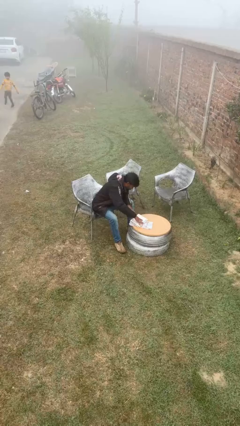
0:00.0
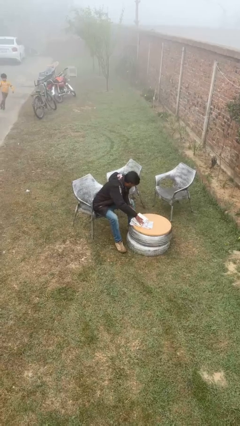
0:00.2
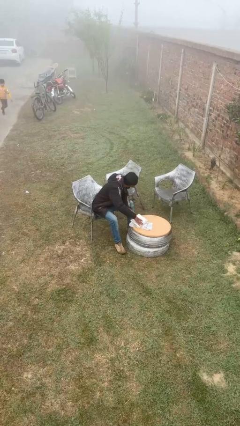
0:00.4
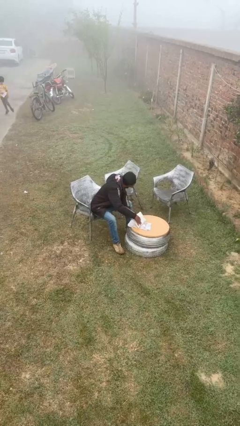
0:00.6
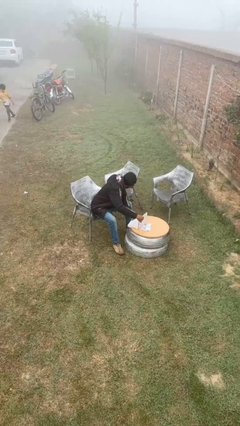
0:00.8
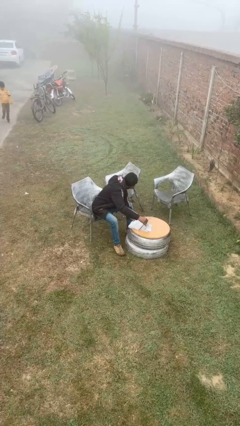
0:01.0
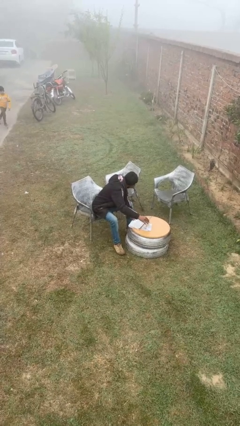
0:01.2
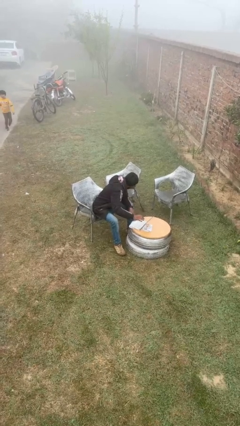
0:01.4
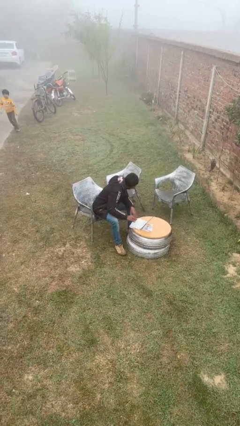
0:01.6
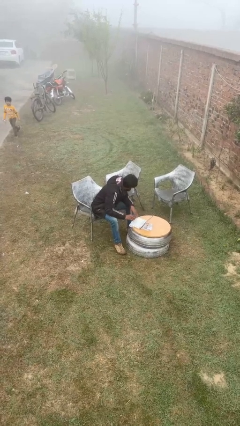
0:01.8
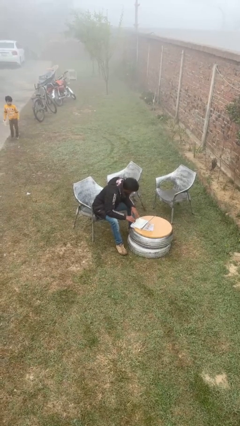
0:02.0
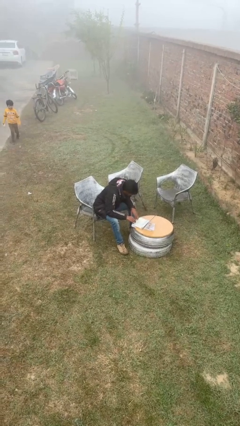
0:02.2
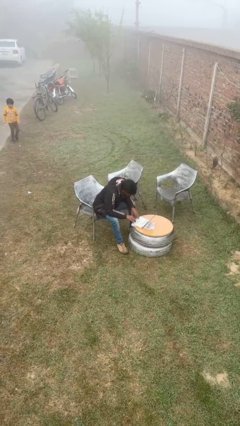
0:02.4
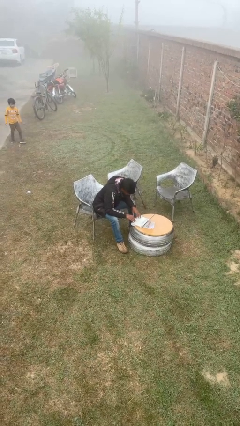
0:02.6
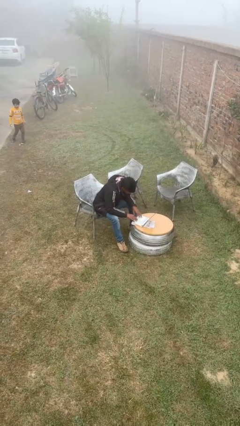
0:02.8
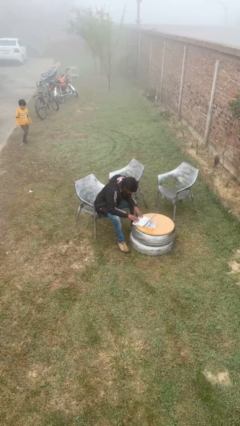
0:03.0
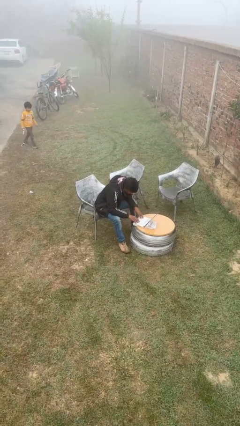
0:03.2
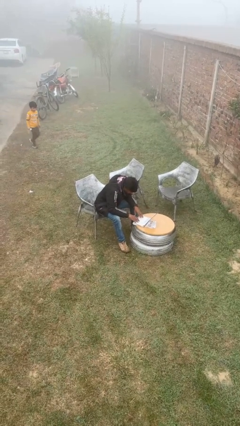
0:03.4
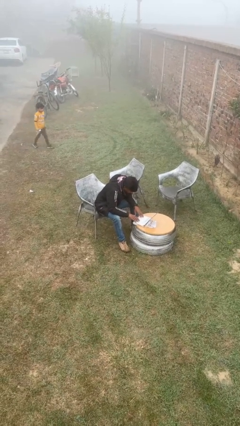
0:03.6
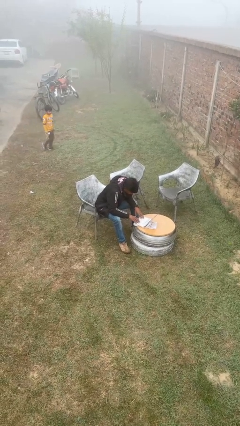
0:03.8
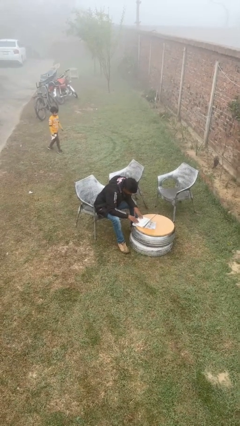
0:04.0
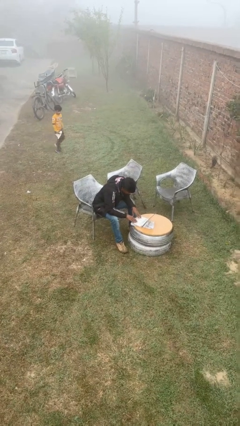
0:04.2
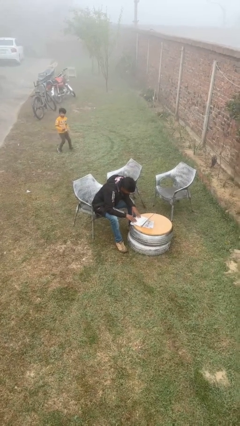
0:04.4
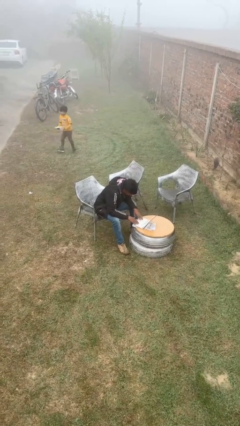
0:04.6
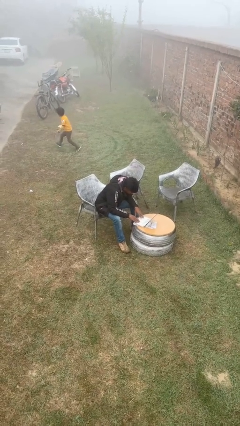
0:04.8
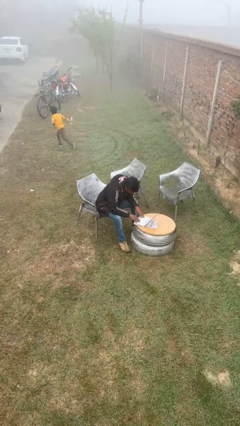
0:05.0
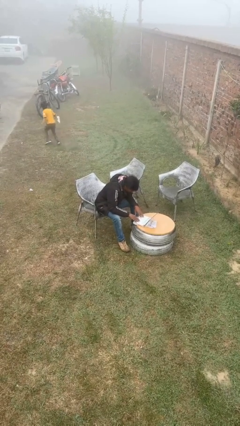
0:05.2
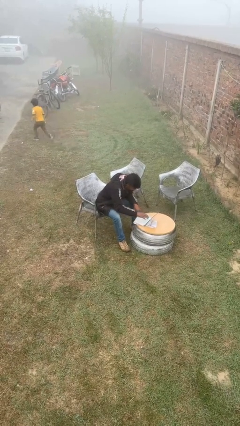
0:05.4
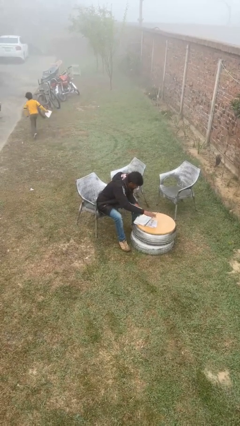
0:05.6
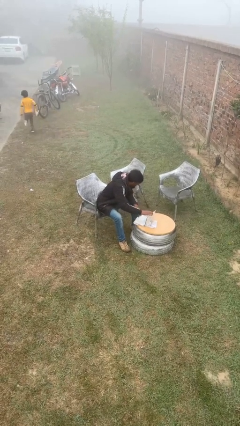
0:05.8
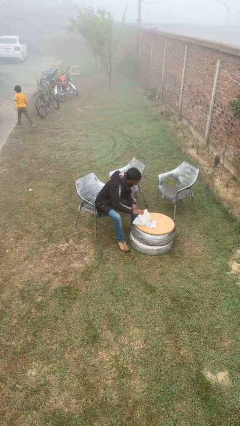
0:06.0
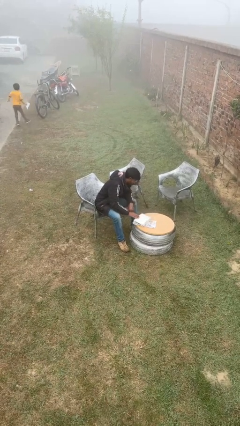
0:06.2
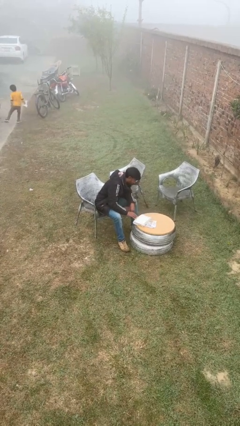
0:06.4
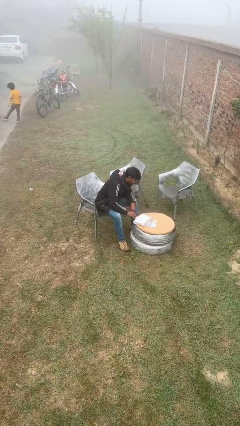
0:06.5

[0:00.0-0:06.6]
person interacts with laptop

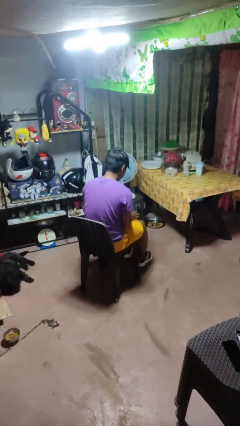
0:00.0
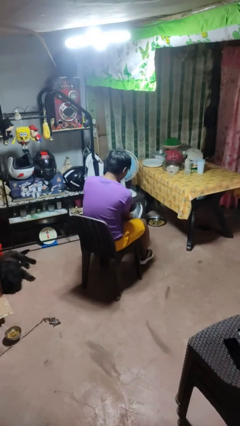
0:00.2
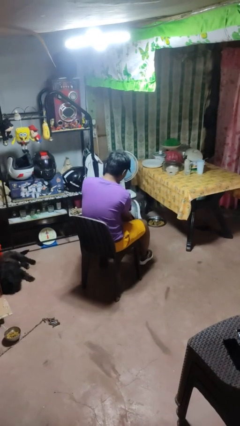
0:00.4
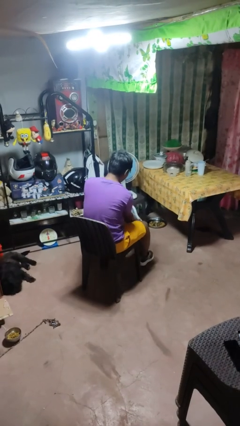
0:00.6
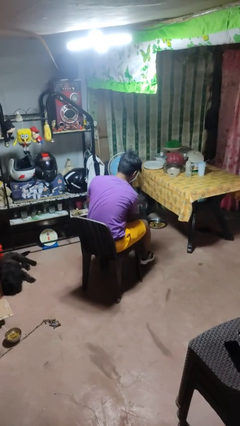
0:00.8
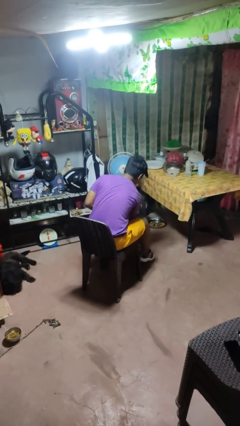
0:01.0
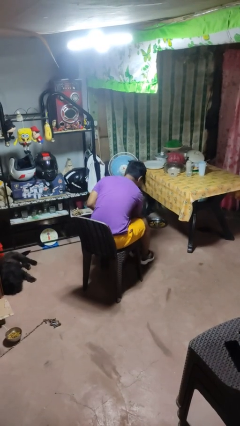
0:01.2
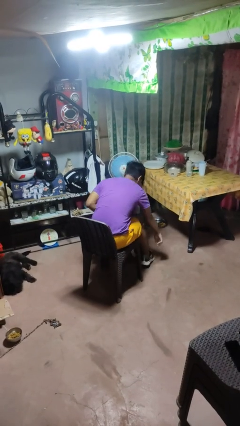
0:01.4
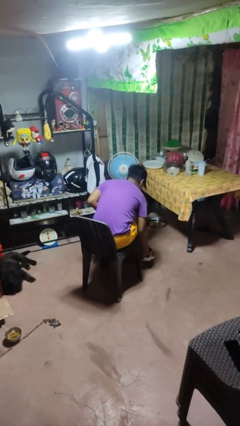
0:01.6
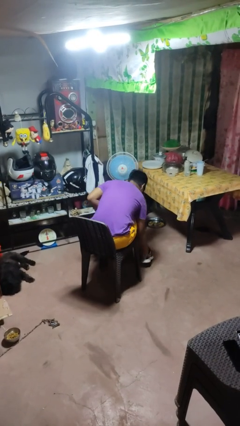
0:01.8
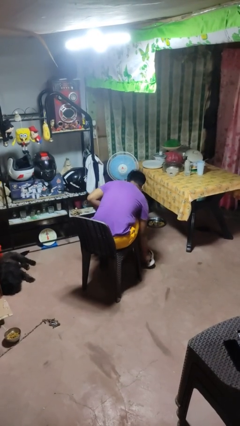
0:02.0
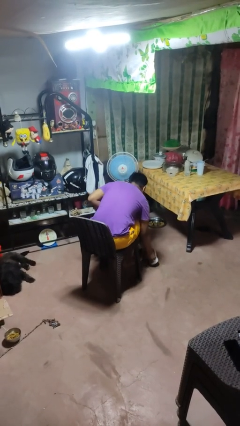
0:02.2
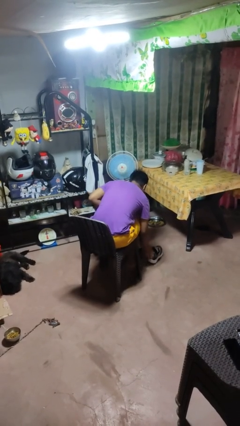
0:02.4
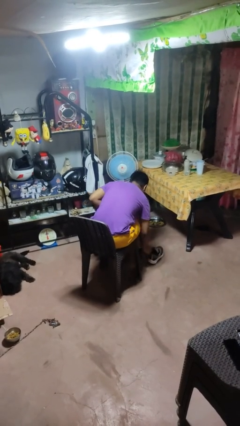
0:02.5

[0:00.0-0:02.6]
person takes off shoes

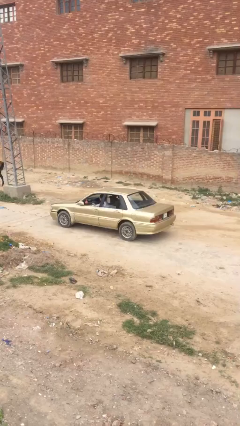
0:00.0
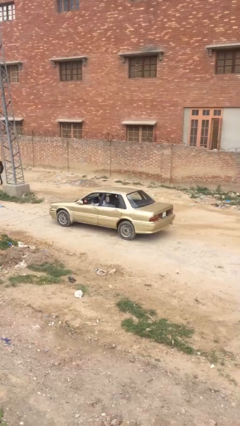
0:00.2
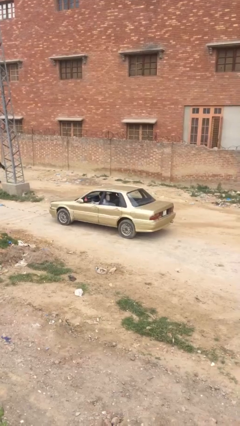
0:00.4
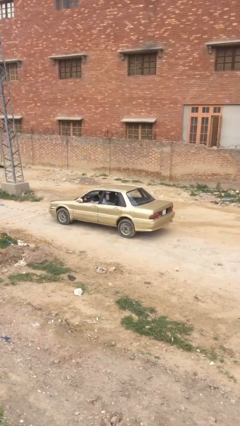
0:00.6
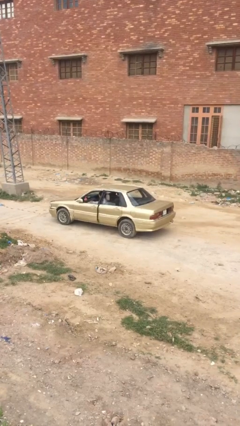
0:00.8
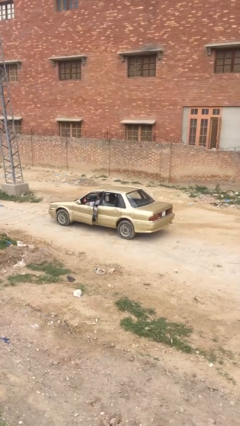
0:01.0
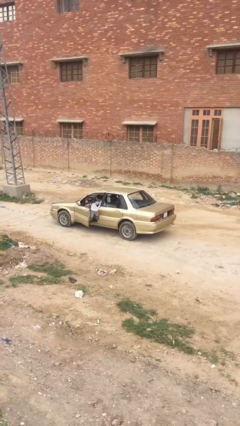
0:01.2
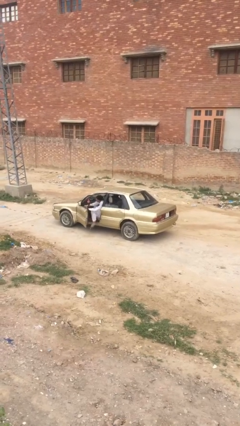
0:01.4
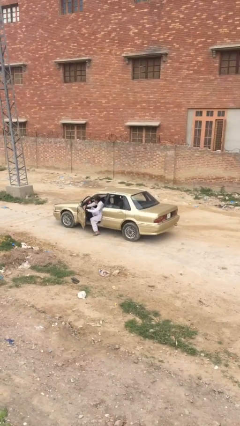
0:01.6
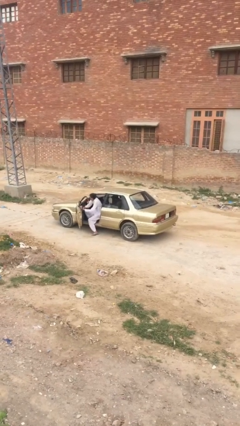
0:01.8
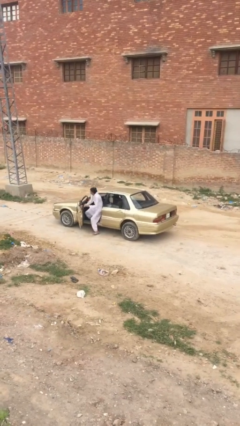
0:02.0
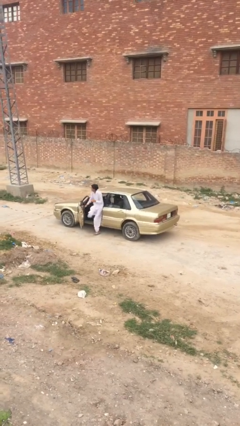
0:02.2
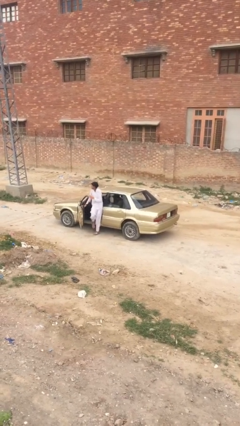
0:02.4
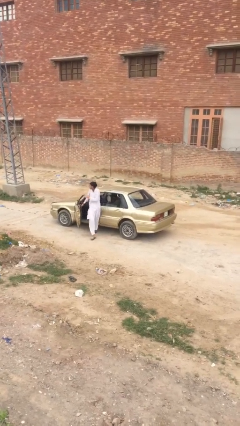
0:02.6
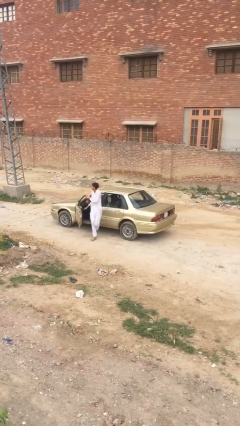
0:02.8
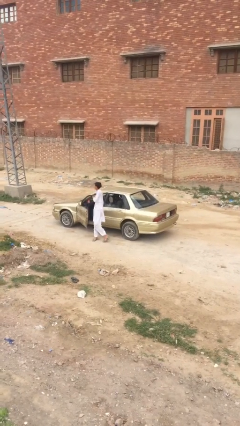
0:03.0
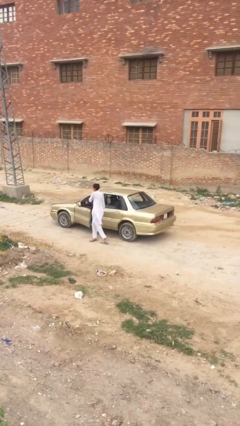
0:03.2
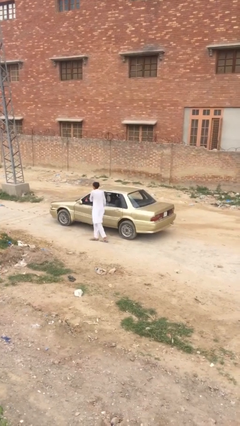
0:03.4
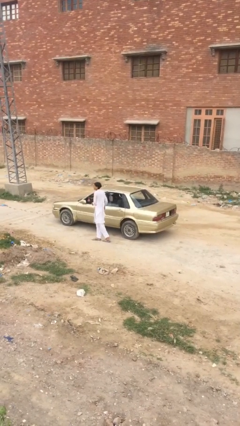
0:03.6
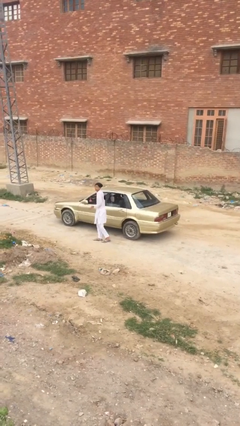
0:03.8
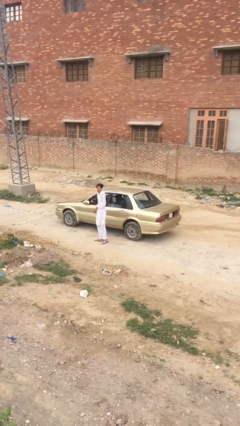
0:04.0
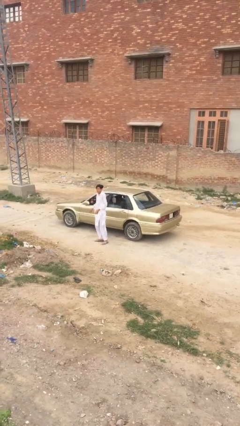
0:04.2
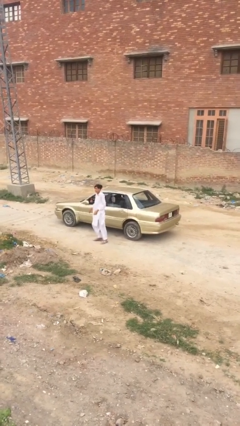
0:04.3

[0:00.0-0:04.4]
car drops off person

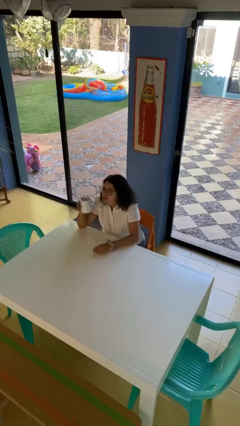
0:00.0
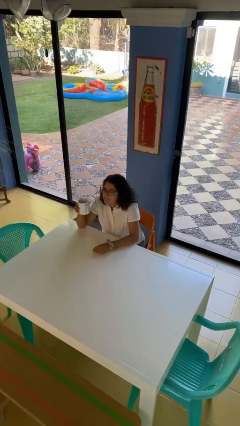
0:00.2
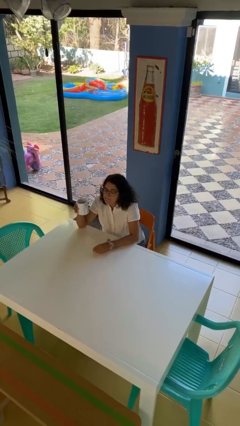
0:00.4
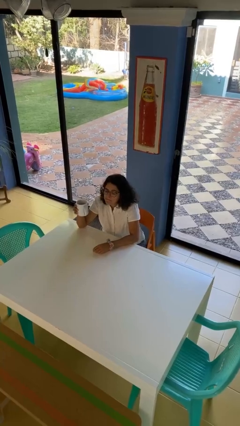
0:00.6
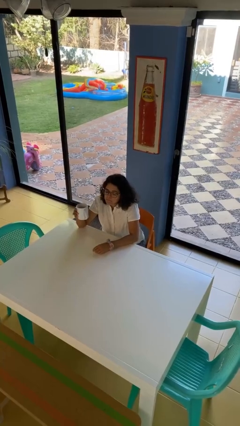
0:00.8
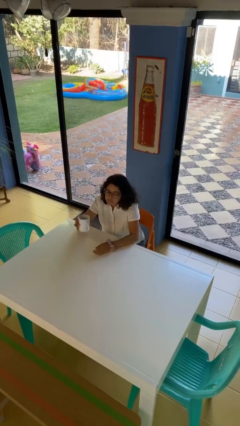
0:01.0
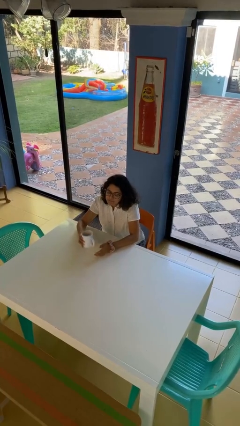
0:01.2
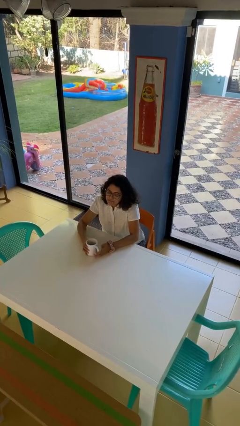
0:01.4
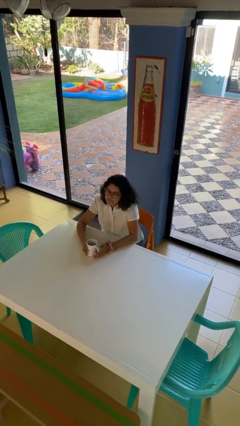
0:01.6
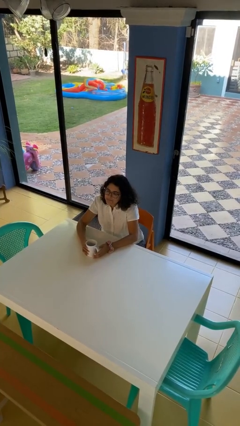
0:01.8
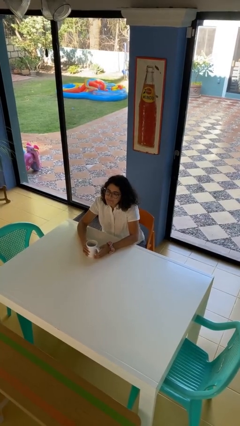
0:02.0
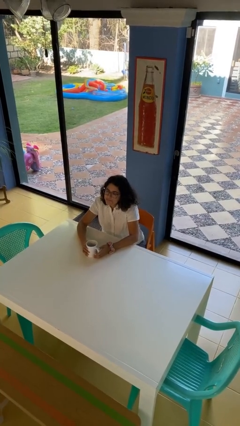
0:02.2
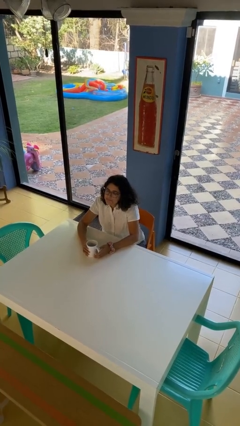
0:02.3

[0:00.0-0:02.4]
person puts down object on table

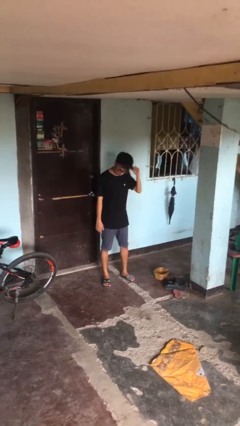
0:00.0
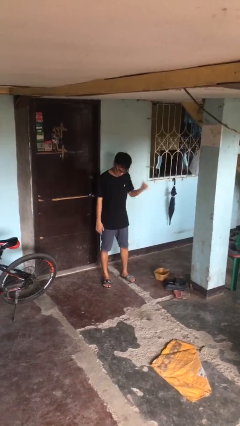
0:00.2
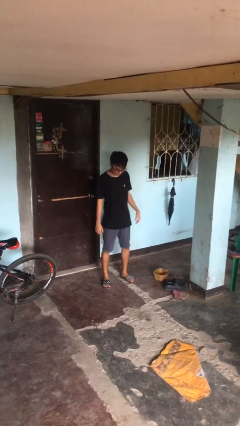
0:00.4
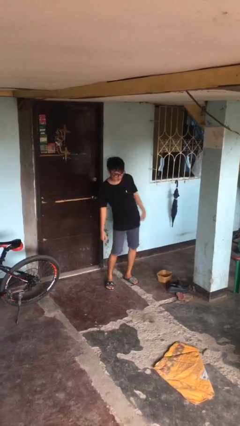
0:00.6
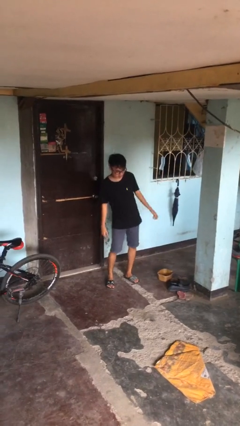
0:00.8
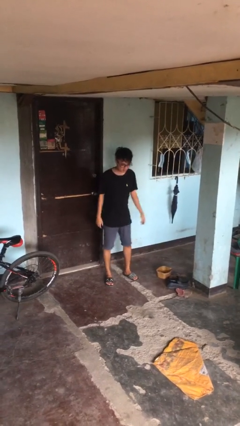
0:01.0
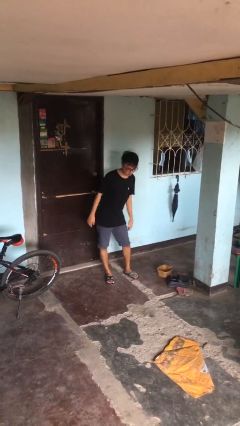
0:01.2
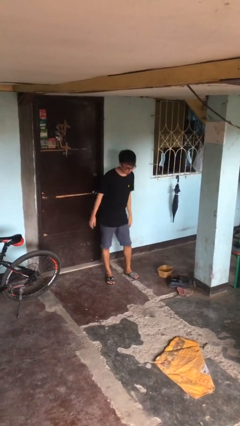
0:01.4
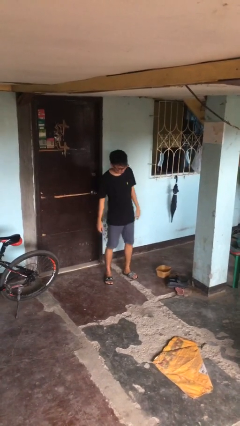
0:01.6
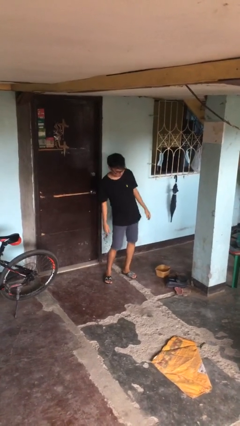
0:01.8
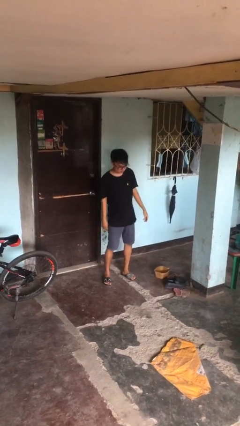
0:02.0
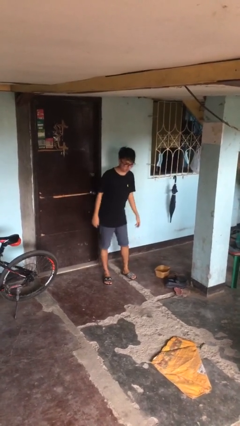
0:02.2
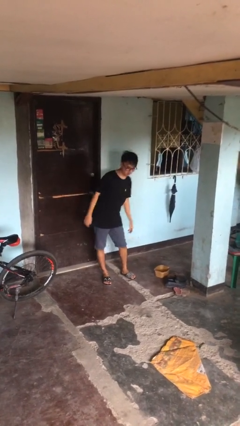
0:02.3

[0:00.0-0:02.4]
person wiggles hips
